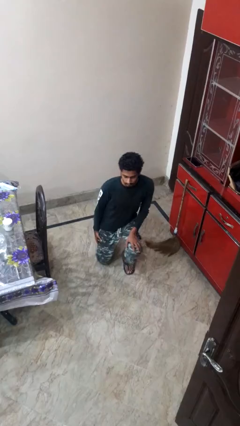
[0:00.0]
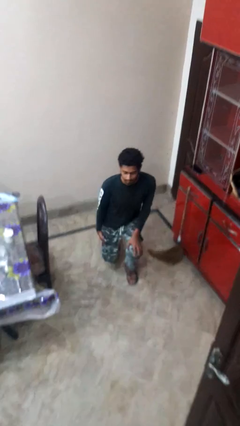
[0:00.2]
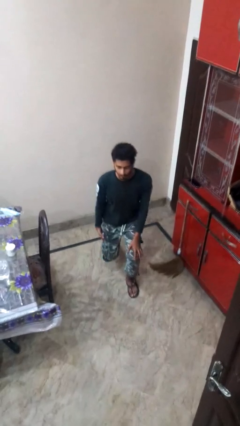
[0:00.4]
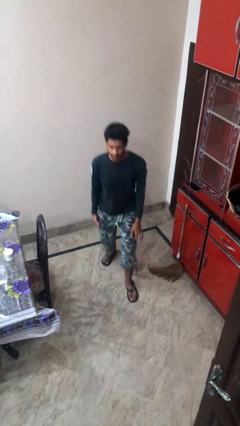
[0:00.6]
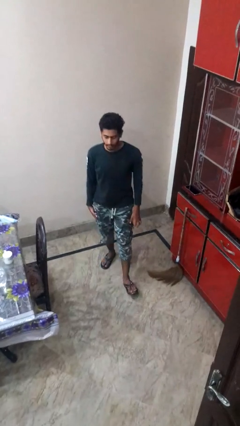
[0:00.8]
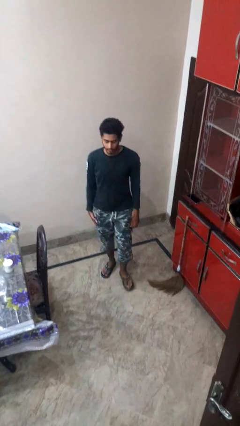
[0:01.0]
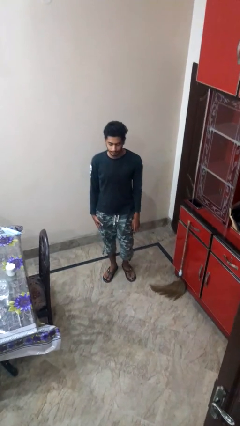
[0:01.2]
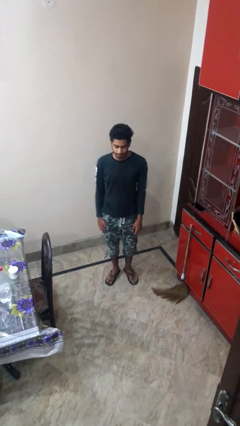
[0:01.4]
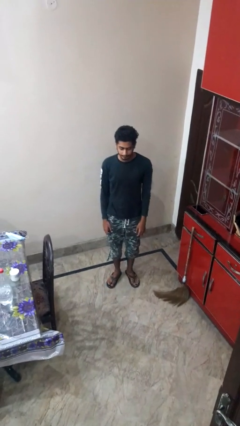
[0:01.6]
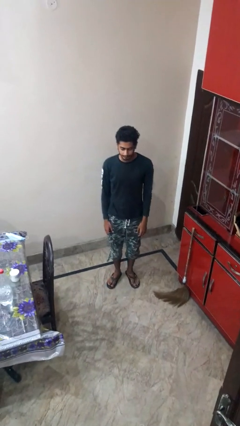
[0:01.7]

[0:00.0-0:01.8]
person stands up from floor

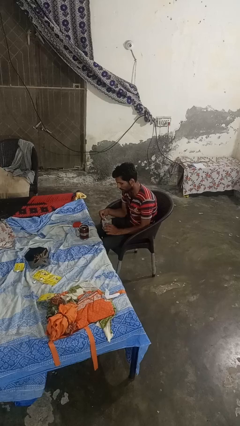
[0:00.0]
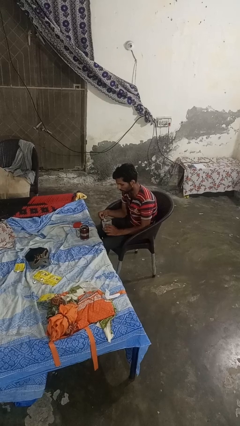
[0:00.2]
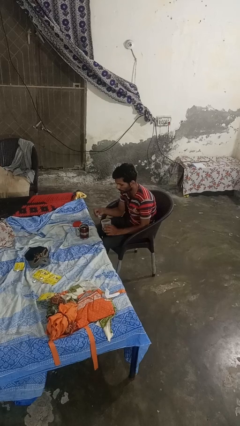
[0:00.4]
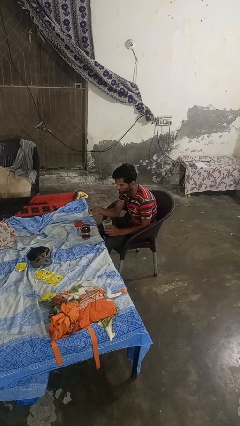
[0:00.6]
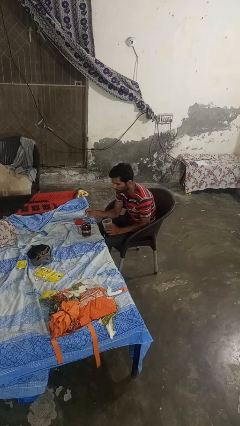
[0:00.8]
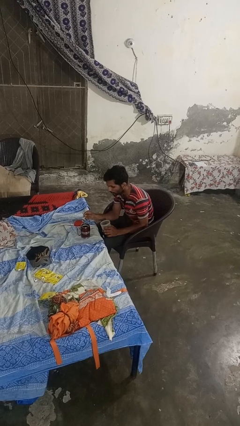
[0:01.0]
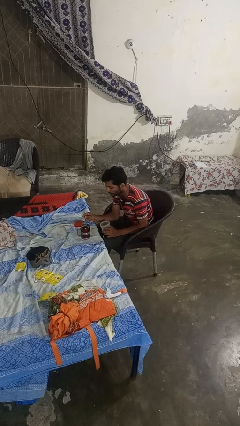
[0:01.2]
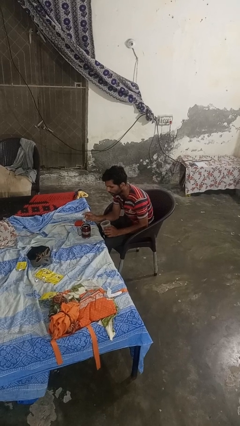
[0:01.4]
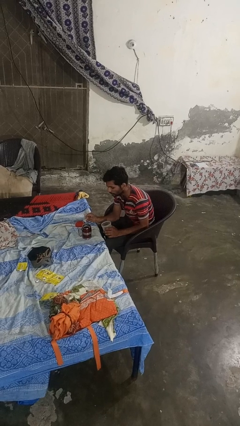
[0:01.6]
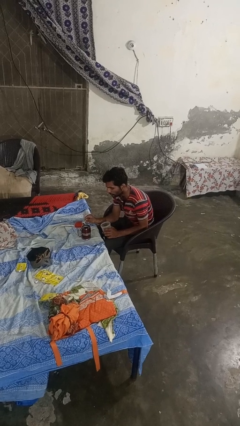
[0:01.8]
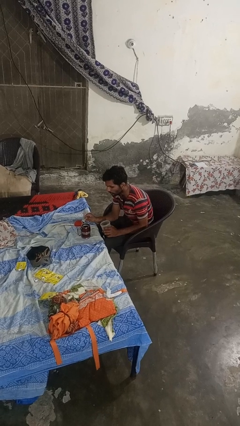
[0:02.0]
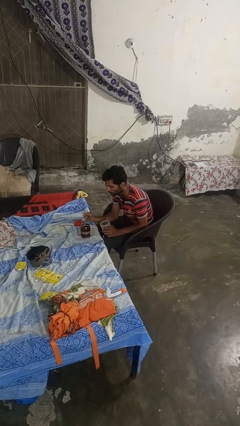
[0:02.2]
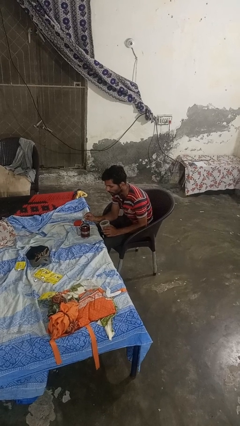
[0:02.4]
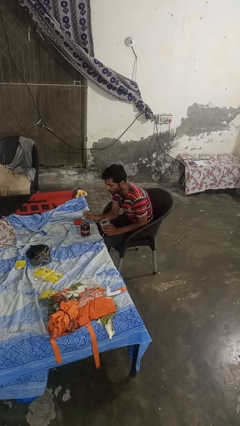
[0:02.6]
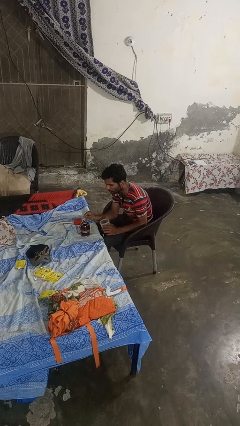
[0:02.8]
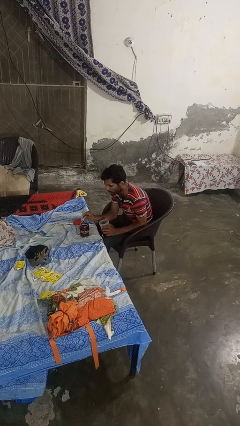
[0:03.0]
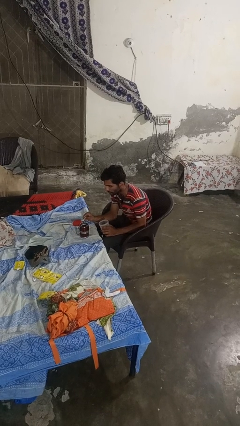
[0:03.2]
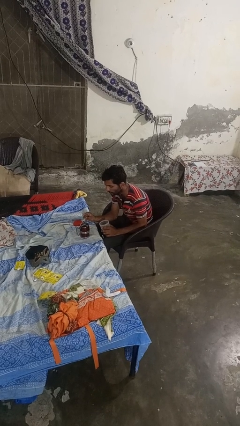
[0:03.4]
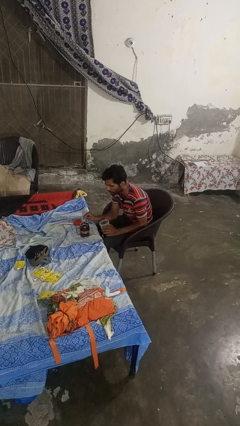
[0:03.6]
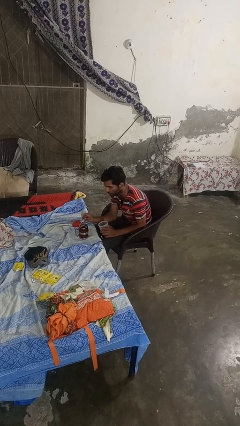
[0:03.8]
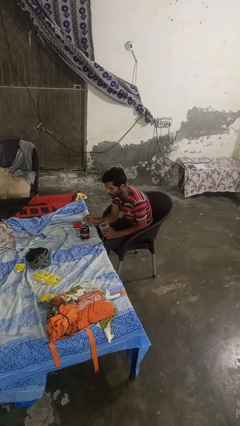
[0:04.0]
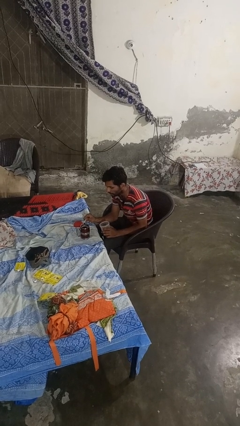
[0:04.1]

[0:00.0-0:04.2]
person pours coffee into mug

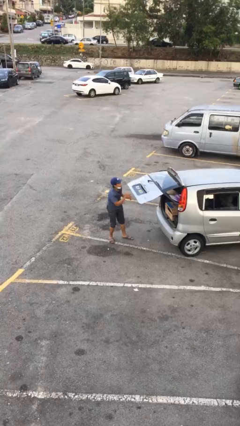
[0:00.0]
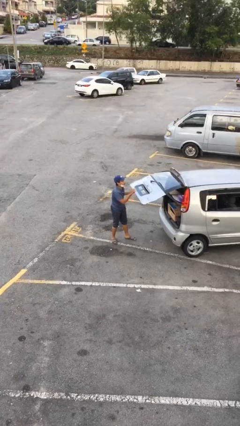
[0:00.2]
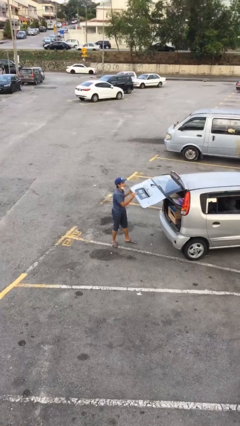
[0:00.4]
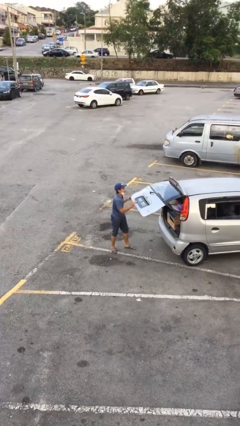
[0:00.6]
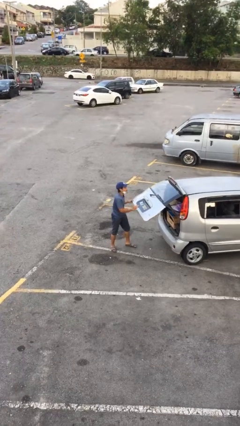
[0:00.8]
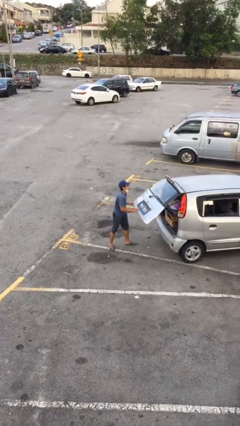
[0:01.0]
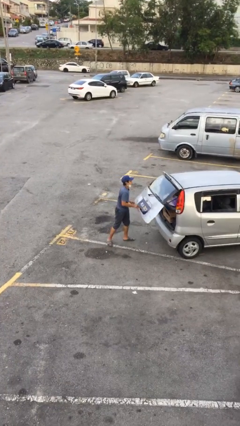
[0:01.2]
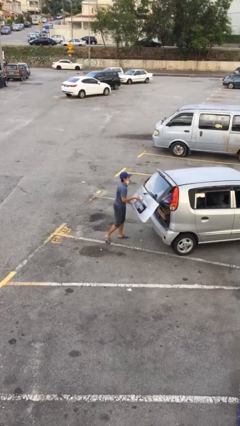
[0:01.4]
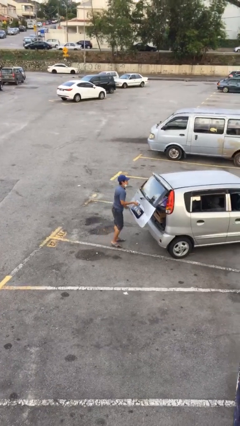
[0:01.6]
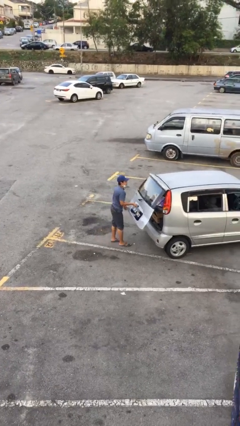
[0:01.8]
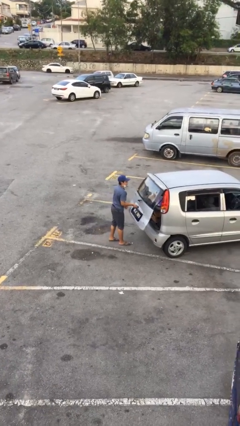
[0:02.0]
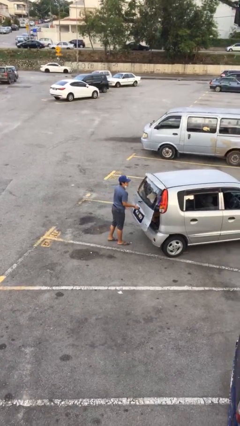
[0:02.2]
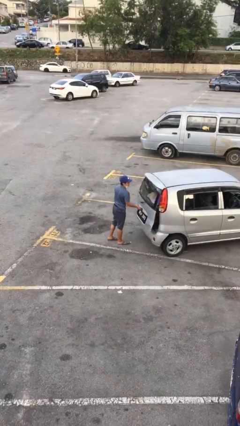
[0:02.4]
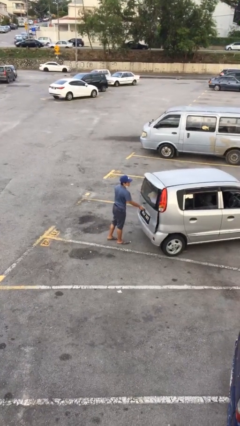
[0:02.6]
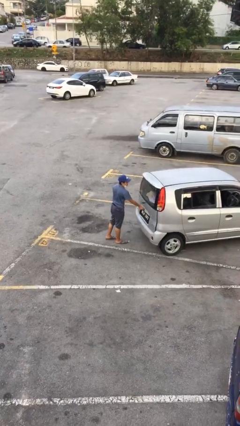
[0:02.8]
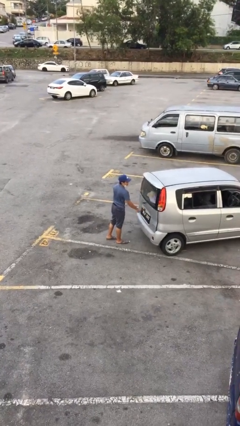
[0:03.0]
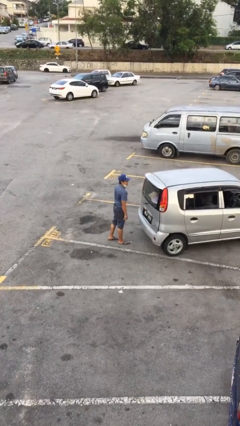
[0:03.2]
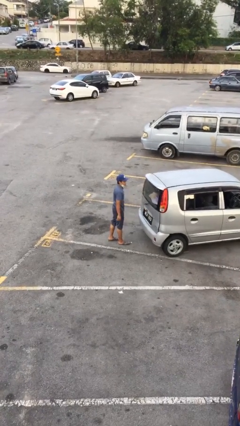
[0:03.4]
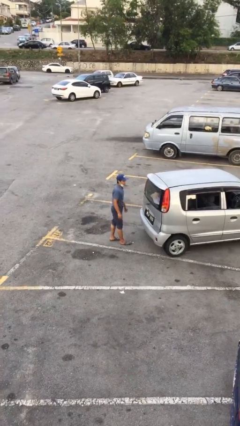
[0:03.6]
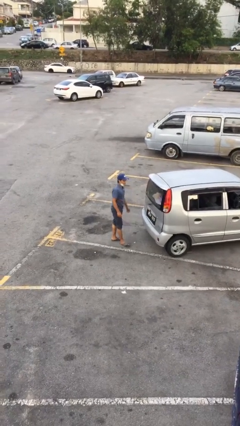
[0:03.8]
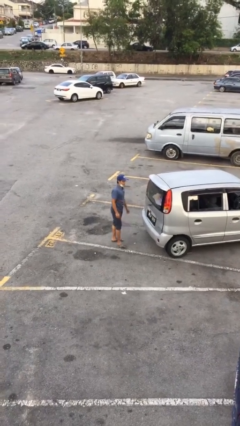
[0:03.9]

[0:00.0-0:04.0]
person closes car trunk

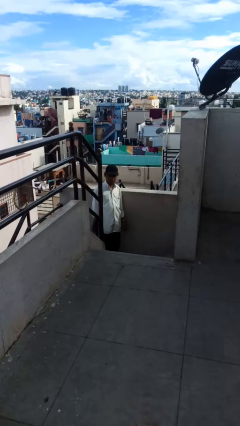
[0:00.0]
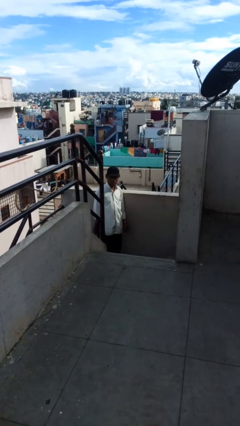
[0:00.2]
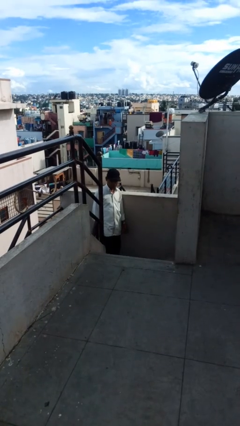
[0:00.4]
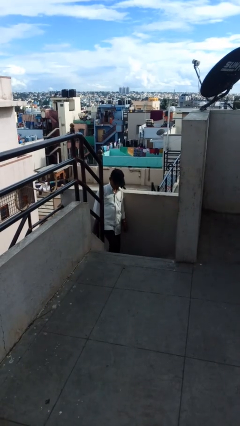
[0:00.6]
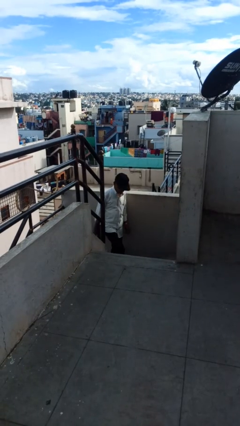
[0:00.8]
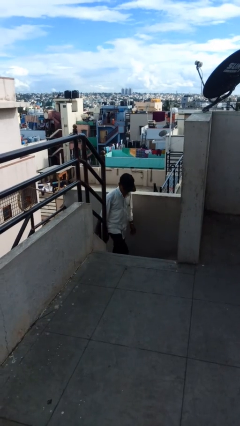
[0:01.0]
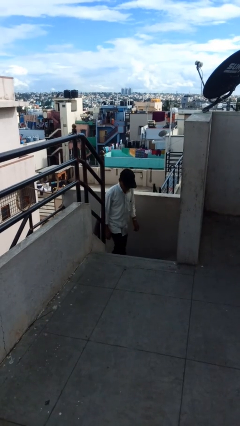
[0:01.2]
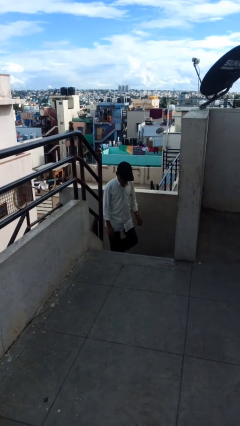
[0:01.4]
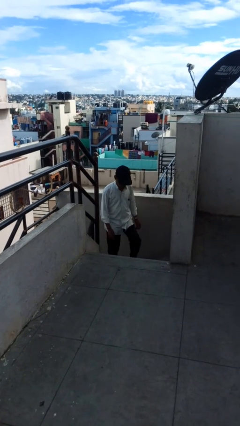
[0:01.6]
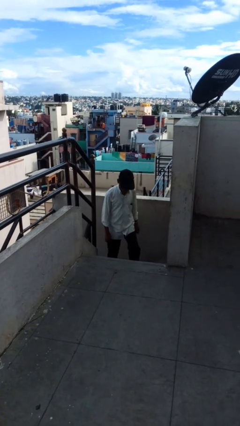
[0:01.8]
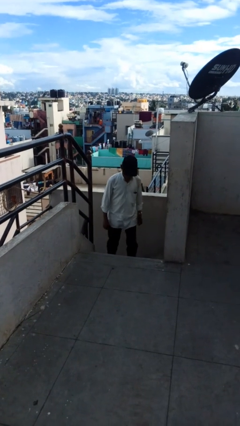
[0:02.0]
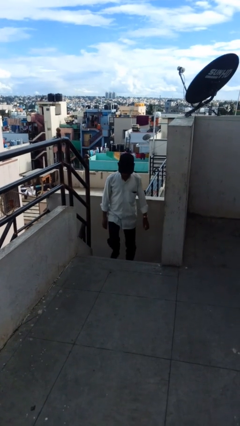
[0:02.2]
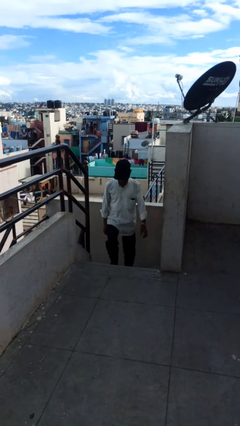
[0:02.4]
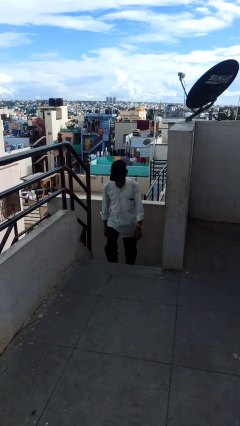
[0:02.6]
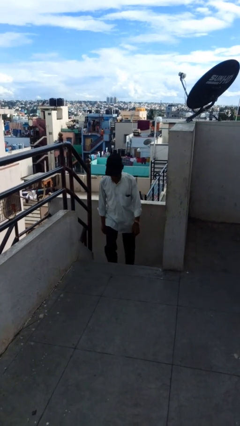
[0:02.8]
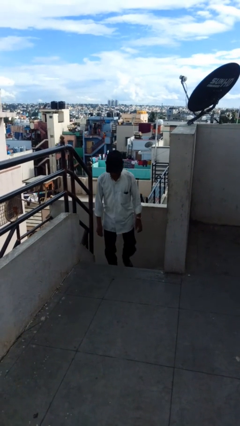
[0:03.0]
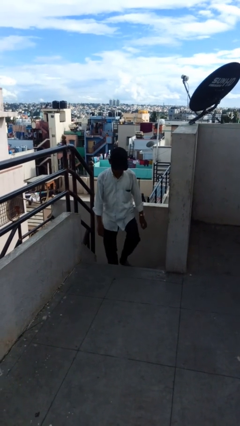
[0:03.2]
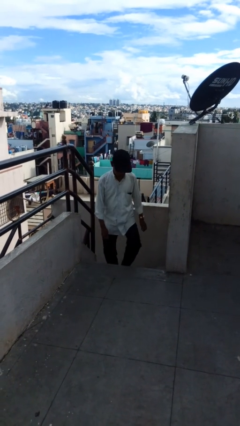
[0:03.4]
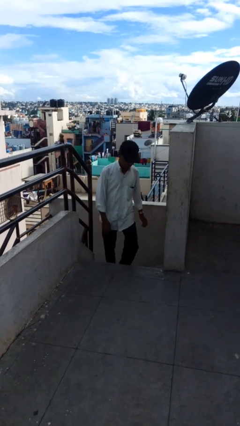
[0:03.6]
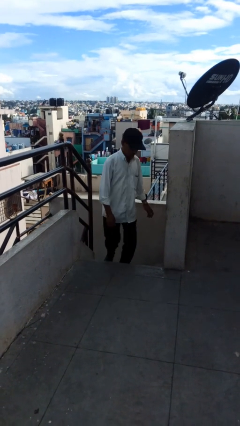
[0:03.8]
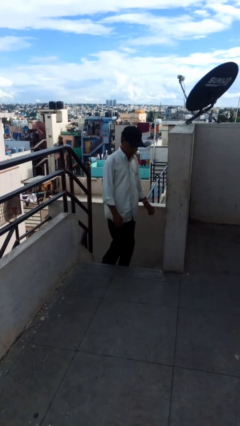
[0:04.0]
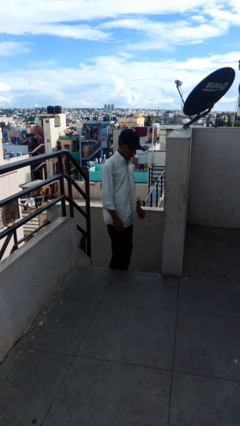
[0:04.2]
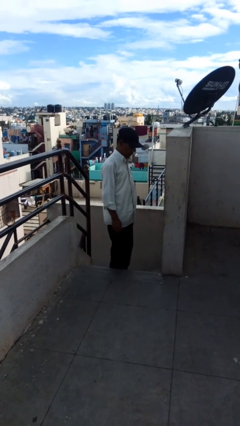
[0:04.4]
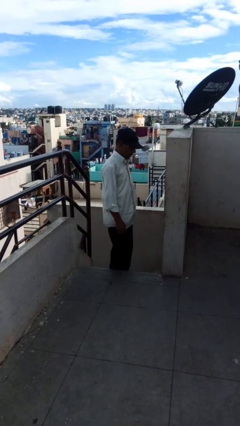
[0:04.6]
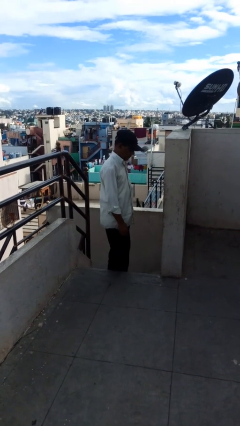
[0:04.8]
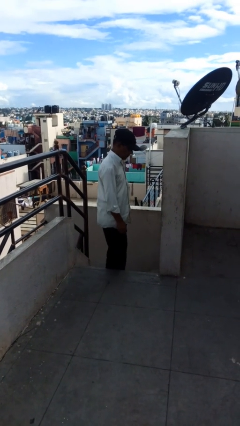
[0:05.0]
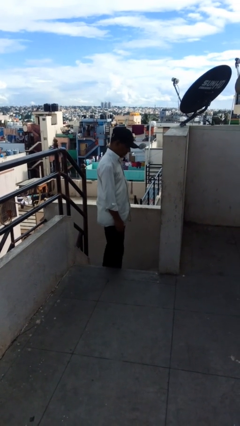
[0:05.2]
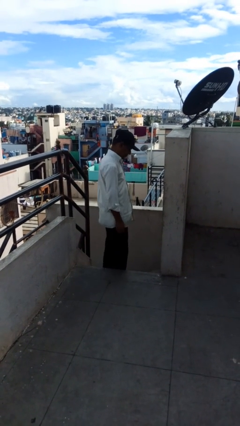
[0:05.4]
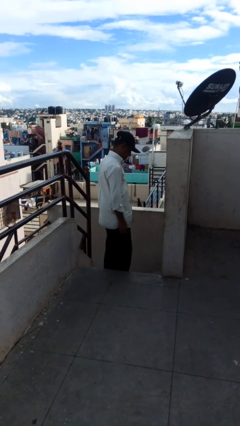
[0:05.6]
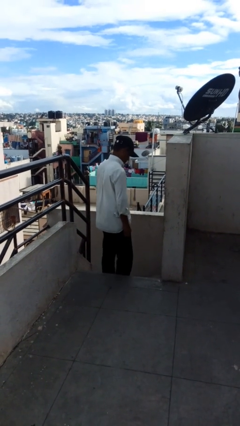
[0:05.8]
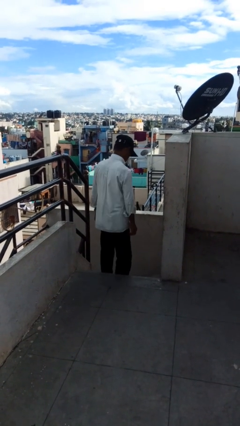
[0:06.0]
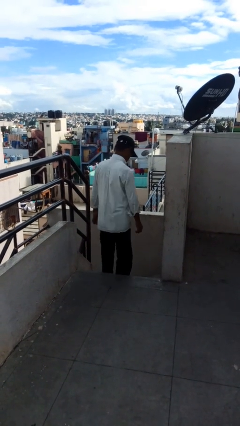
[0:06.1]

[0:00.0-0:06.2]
person climbs up stairs

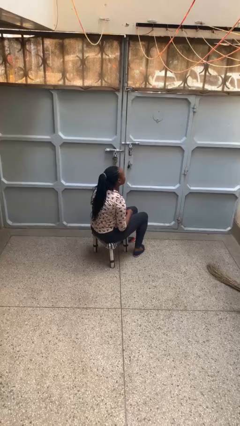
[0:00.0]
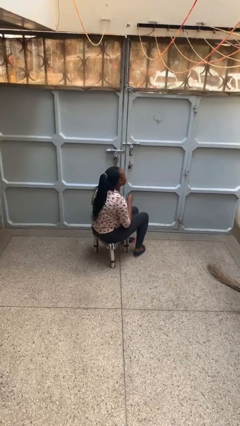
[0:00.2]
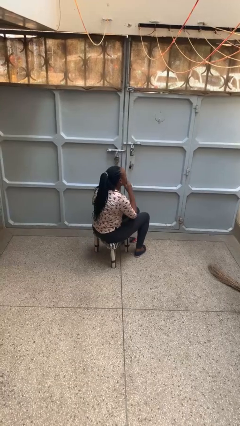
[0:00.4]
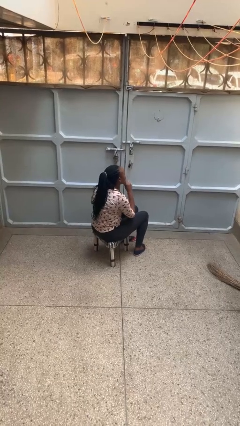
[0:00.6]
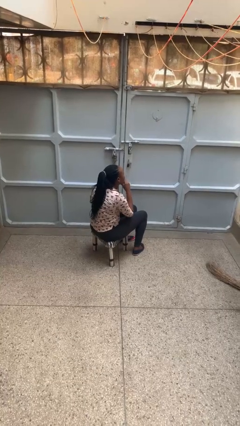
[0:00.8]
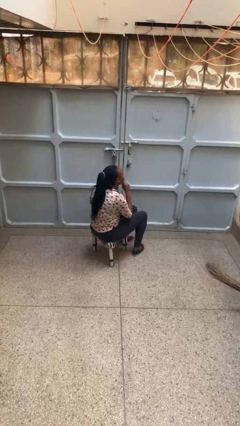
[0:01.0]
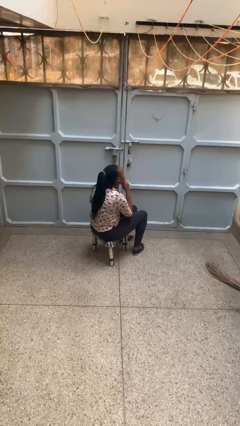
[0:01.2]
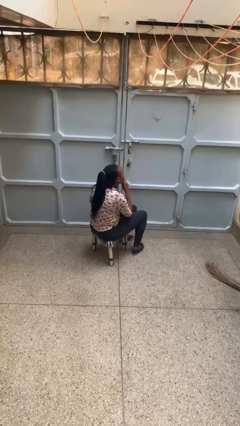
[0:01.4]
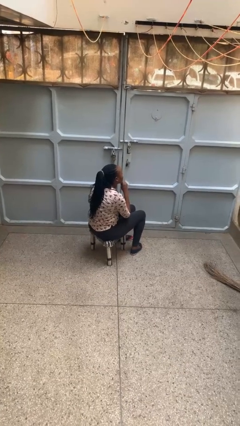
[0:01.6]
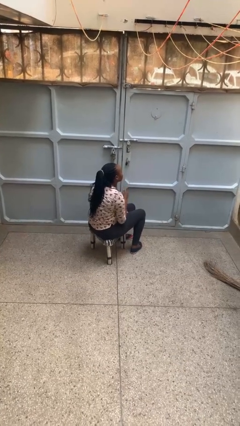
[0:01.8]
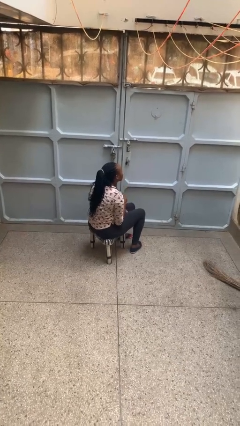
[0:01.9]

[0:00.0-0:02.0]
person strokes chin
